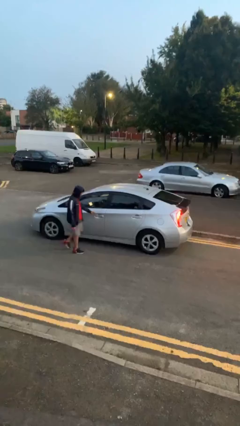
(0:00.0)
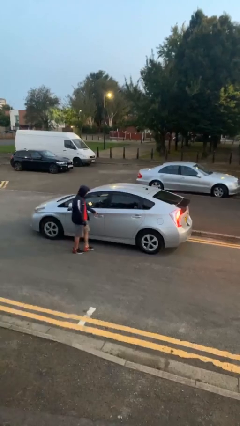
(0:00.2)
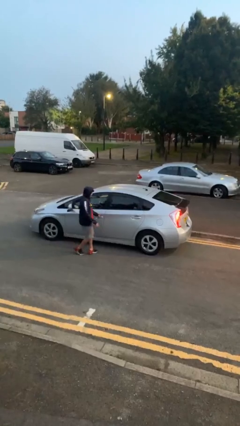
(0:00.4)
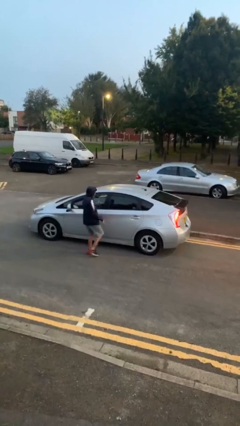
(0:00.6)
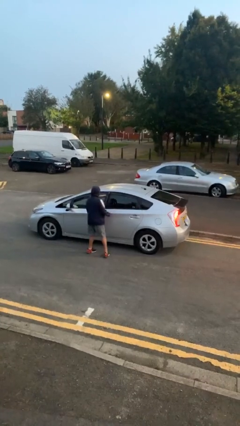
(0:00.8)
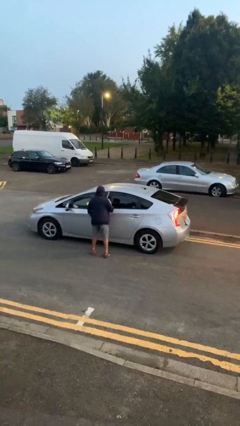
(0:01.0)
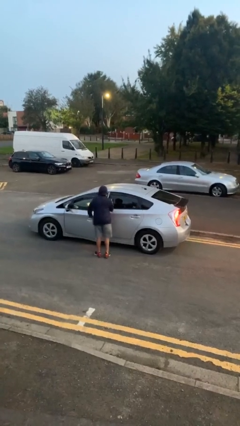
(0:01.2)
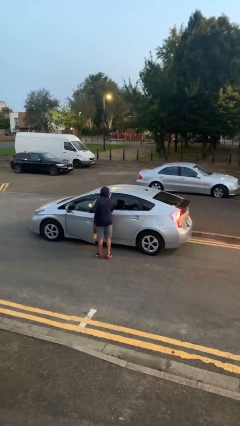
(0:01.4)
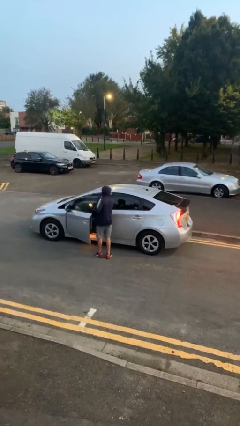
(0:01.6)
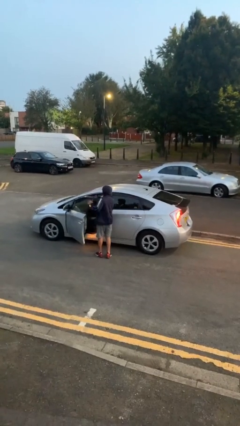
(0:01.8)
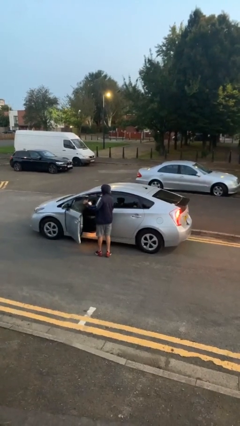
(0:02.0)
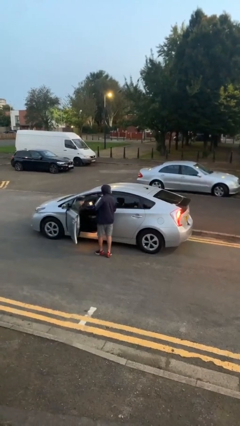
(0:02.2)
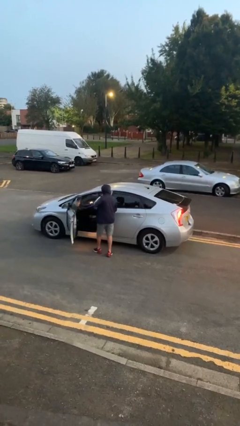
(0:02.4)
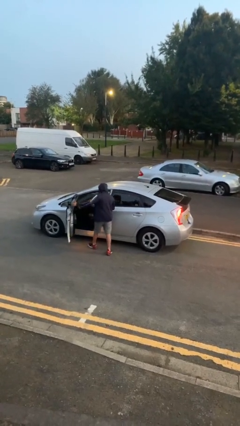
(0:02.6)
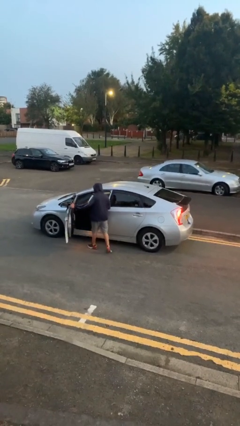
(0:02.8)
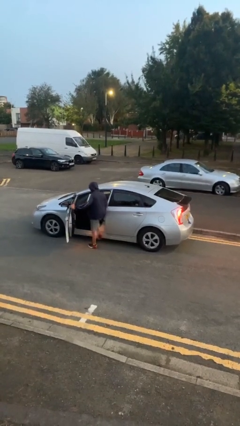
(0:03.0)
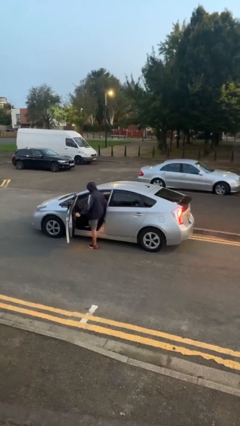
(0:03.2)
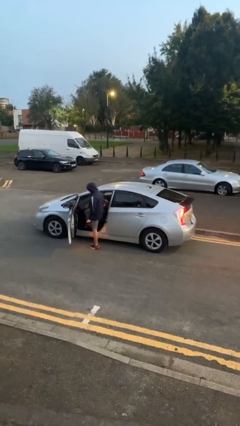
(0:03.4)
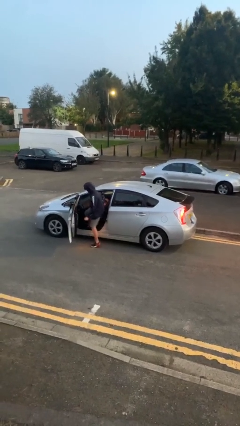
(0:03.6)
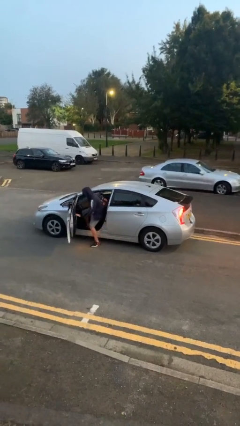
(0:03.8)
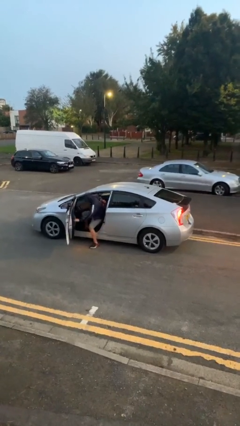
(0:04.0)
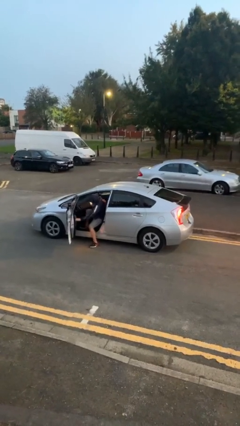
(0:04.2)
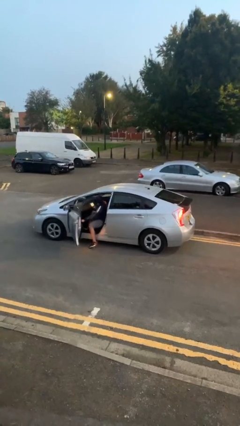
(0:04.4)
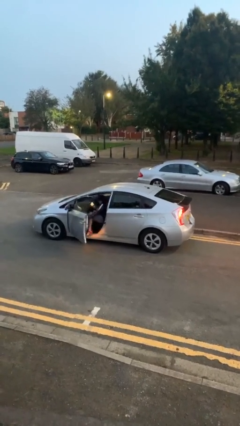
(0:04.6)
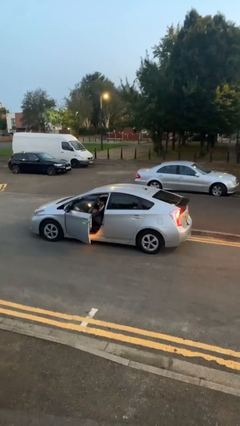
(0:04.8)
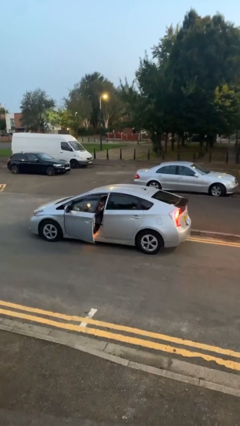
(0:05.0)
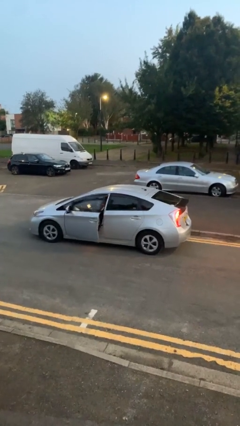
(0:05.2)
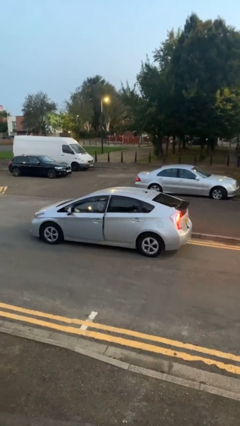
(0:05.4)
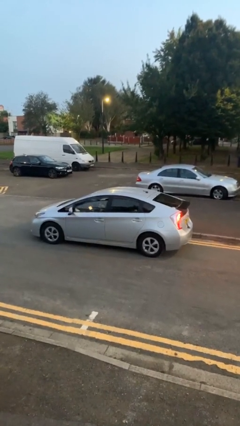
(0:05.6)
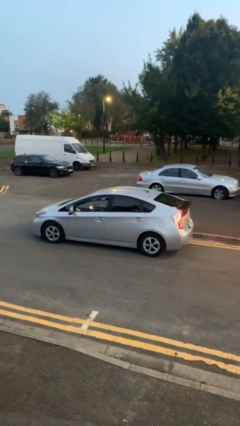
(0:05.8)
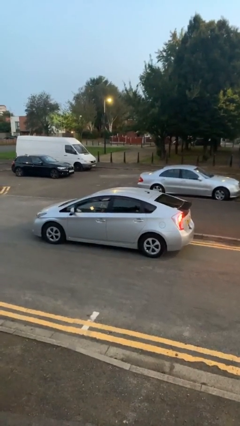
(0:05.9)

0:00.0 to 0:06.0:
car picks up person

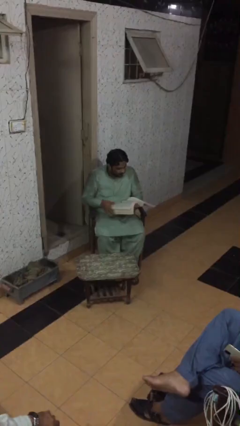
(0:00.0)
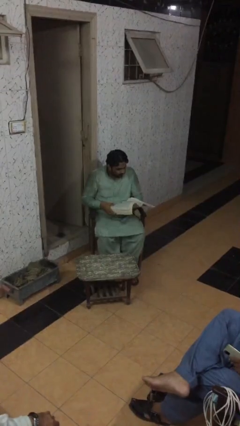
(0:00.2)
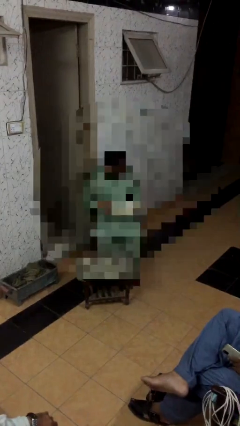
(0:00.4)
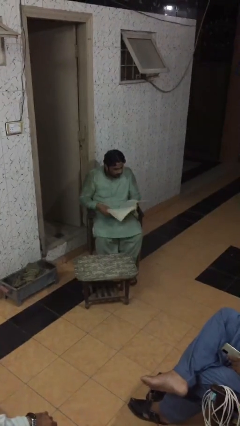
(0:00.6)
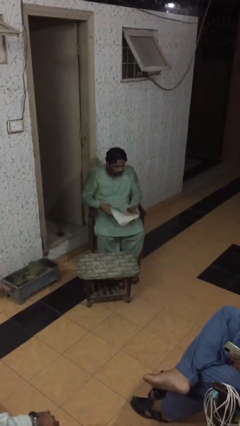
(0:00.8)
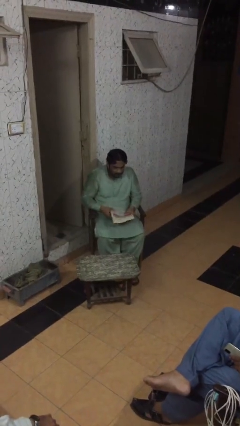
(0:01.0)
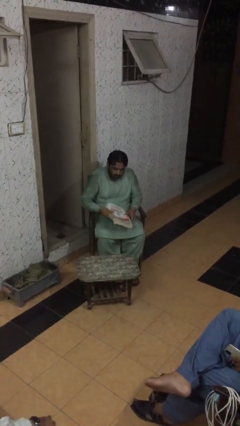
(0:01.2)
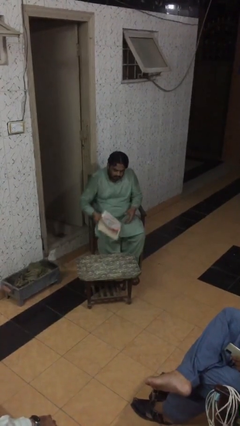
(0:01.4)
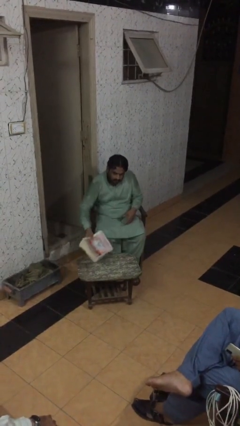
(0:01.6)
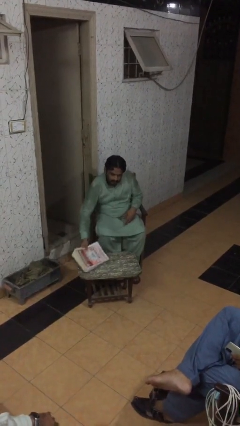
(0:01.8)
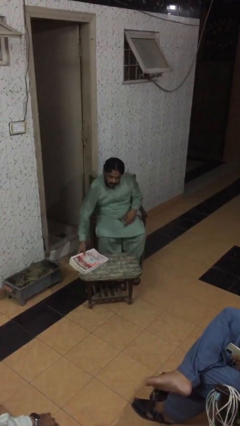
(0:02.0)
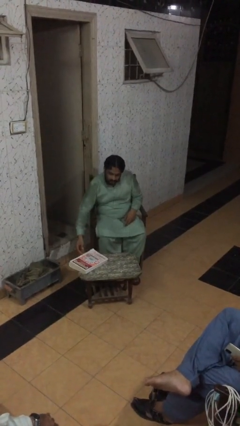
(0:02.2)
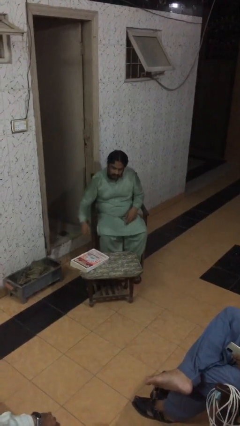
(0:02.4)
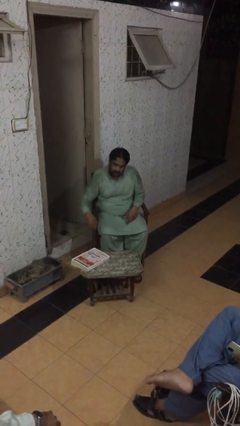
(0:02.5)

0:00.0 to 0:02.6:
person puts down object on table

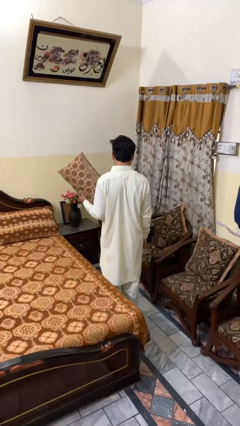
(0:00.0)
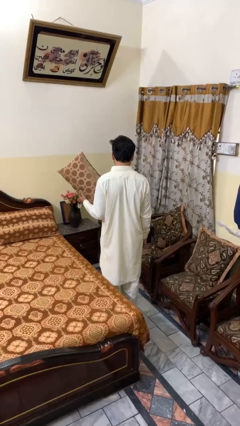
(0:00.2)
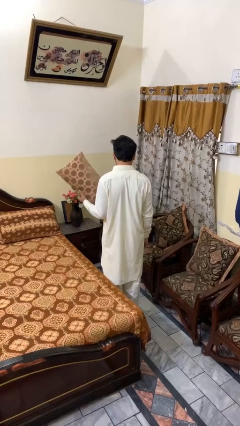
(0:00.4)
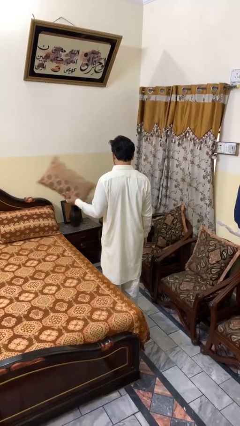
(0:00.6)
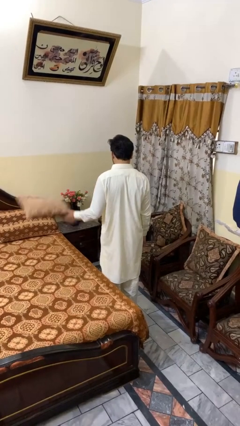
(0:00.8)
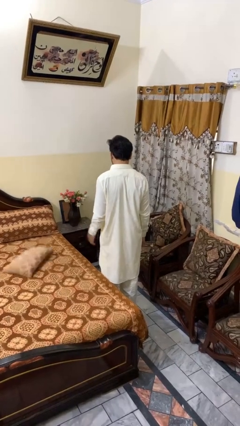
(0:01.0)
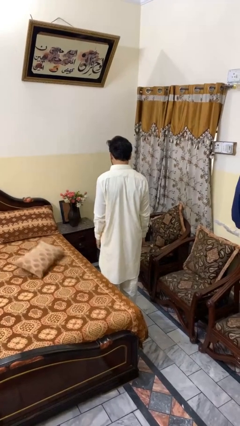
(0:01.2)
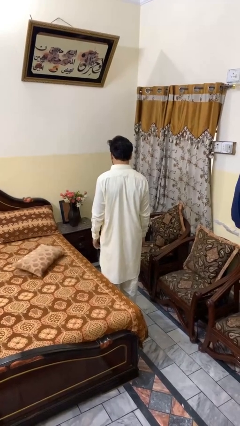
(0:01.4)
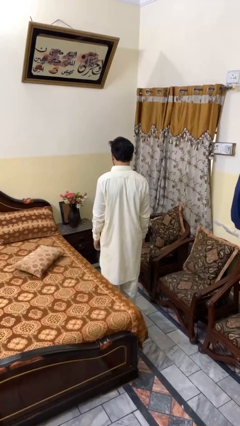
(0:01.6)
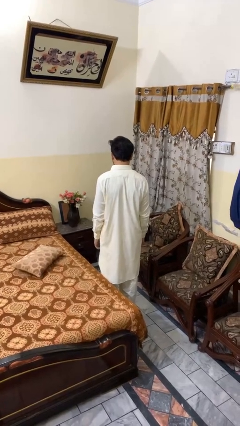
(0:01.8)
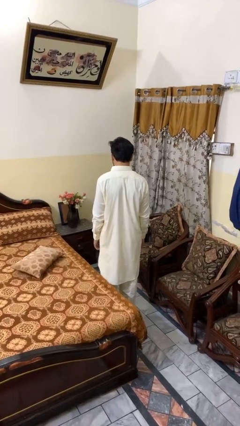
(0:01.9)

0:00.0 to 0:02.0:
person throws object on bed

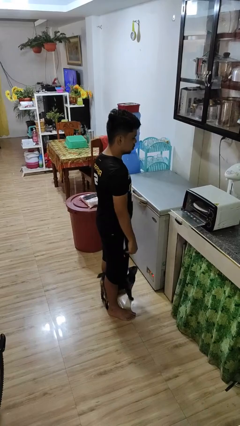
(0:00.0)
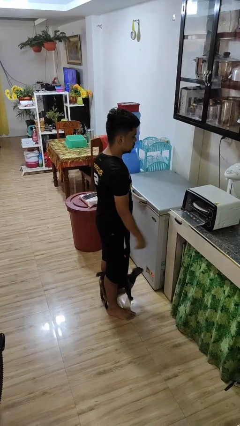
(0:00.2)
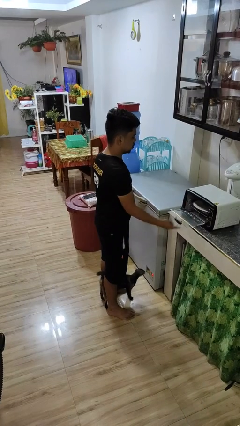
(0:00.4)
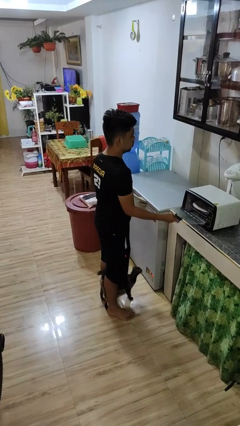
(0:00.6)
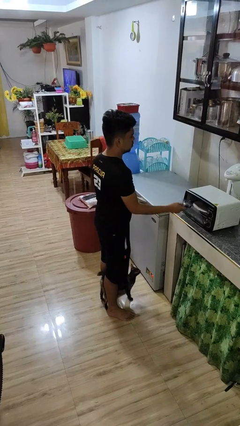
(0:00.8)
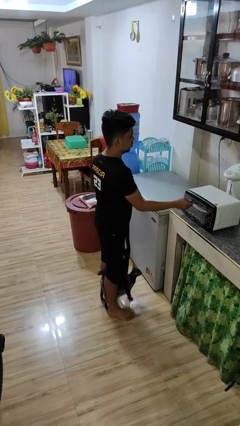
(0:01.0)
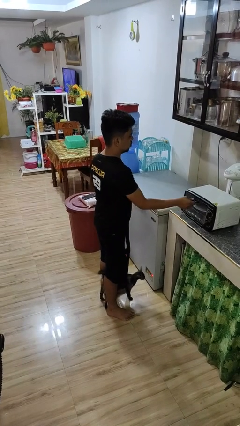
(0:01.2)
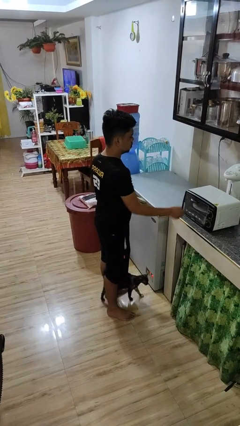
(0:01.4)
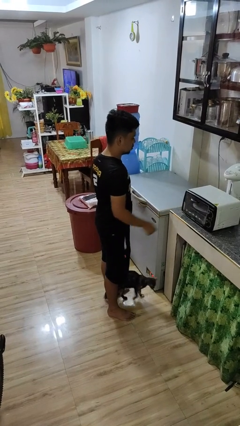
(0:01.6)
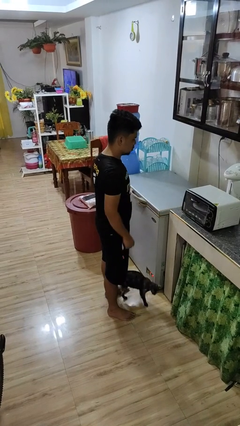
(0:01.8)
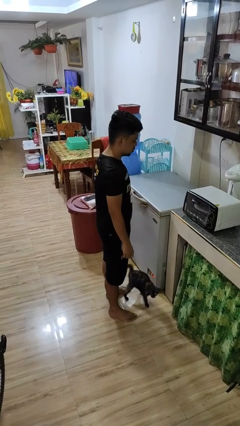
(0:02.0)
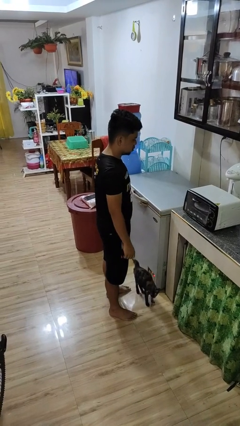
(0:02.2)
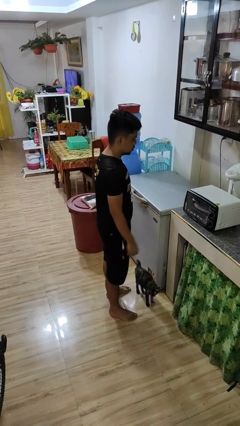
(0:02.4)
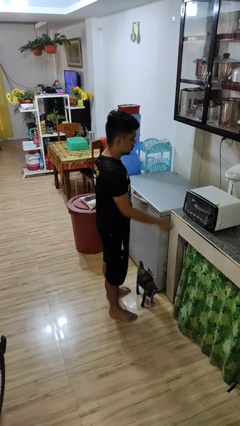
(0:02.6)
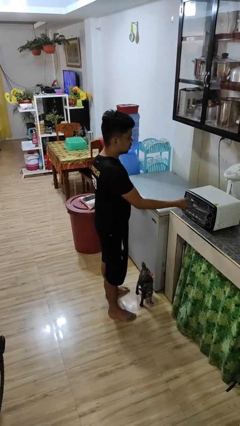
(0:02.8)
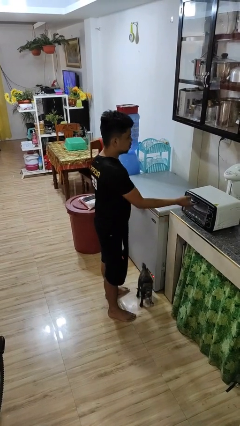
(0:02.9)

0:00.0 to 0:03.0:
person closes microwave

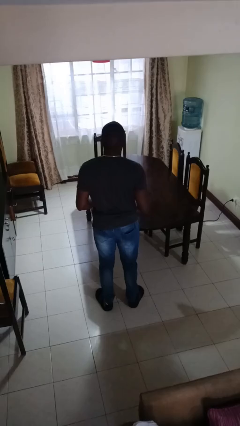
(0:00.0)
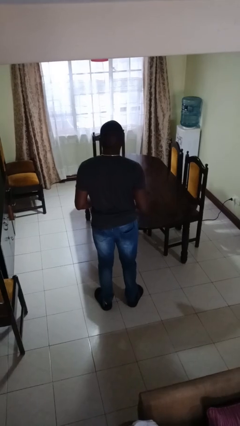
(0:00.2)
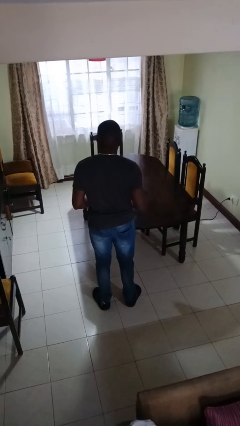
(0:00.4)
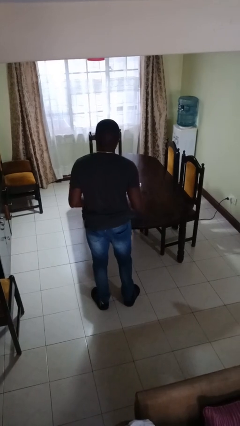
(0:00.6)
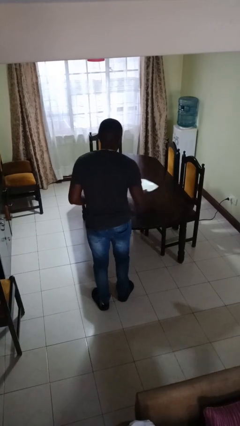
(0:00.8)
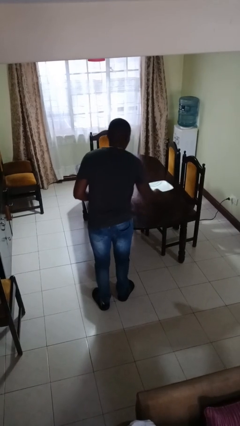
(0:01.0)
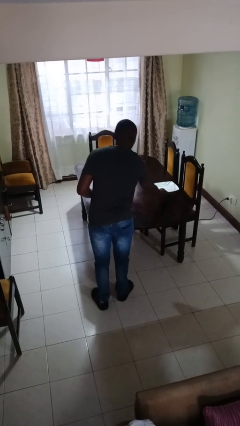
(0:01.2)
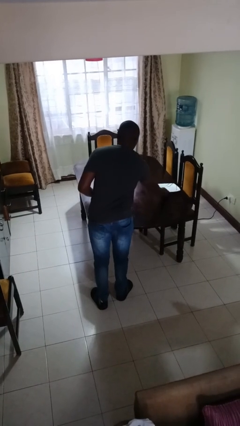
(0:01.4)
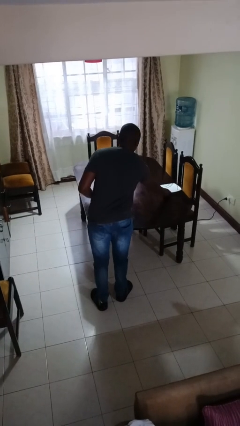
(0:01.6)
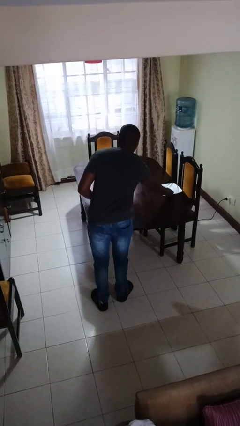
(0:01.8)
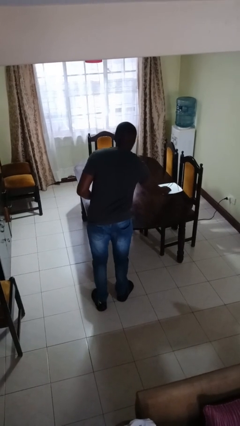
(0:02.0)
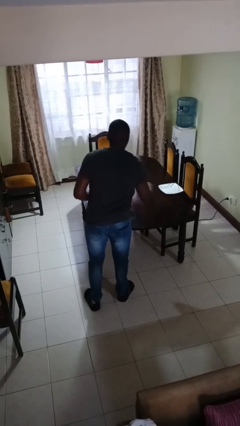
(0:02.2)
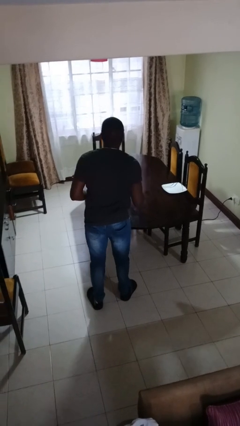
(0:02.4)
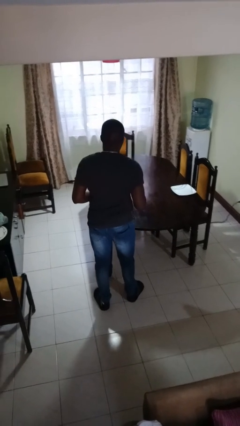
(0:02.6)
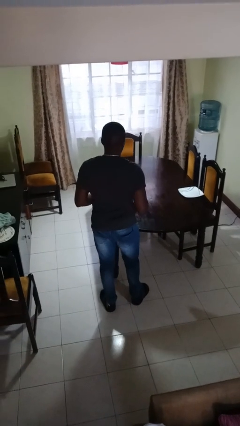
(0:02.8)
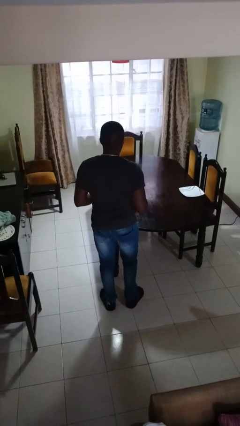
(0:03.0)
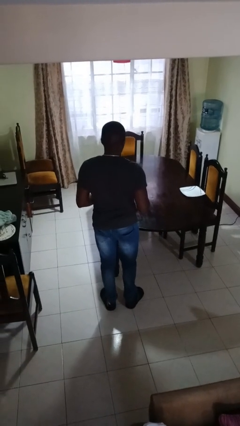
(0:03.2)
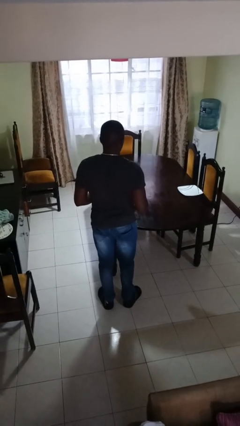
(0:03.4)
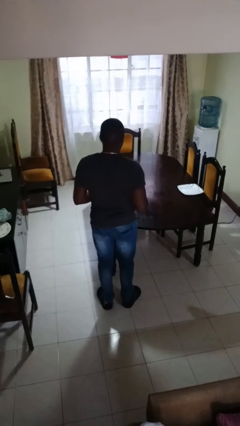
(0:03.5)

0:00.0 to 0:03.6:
person sets table

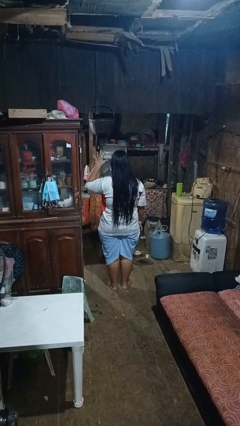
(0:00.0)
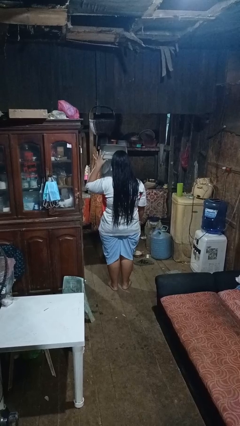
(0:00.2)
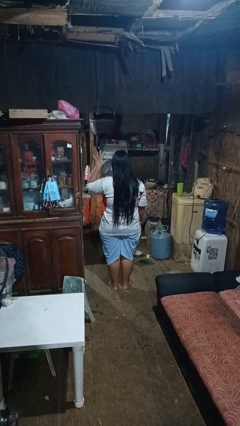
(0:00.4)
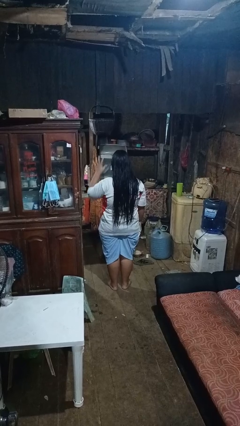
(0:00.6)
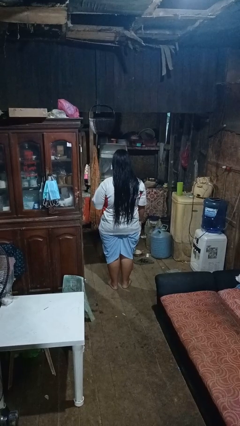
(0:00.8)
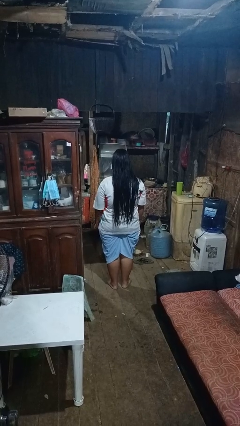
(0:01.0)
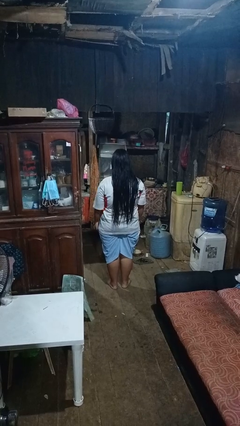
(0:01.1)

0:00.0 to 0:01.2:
person gestures number five
